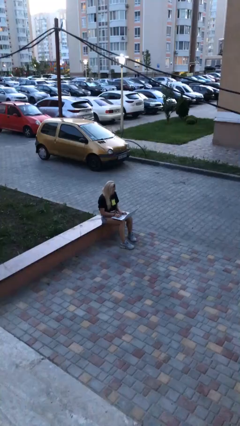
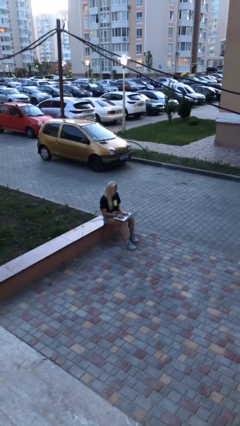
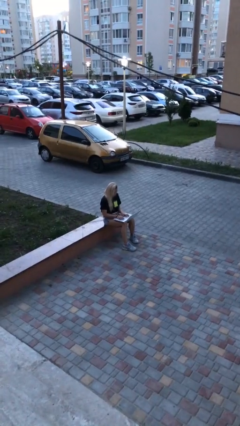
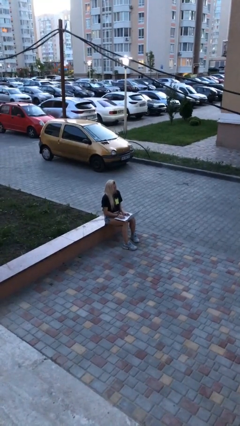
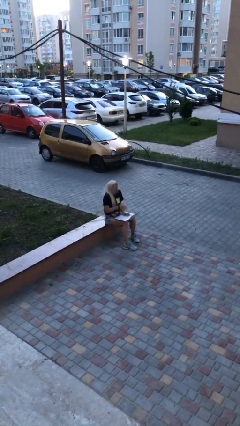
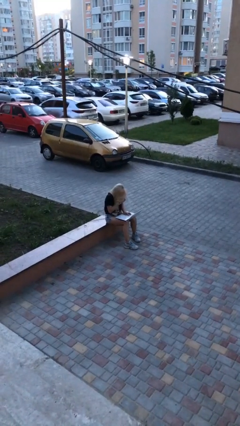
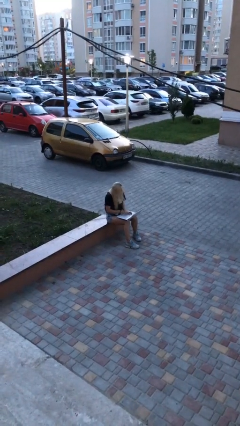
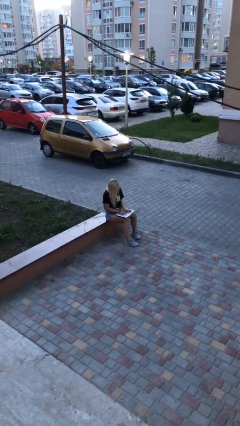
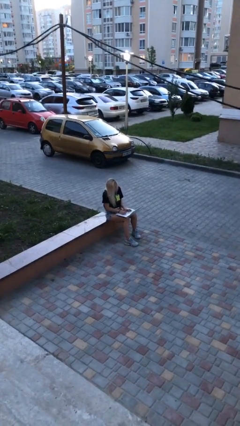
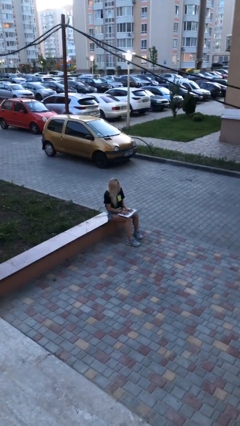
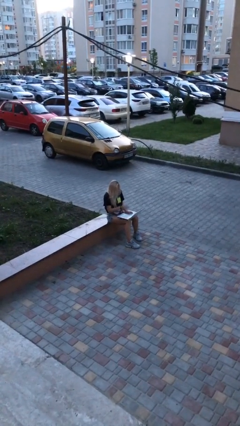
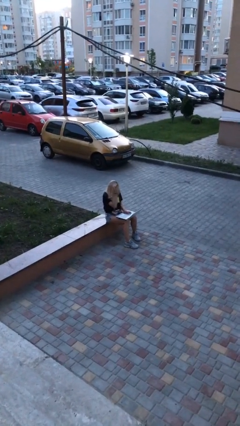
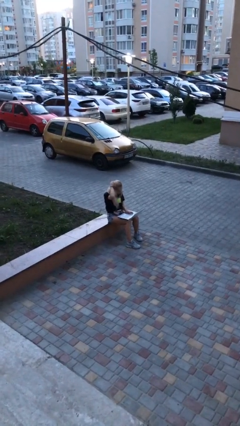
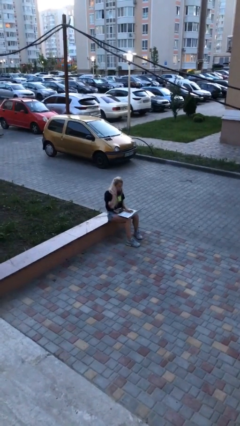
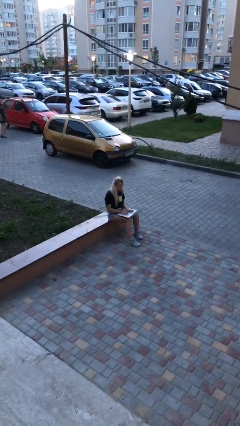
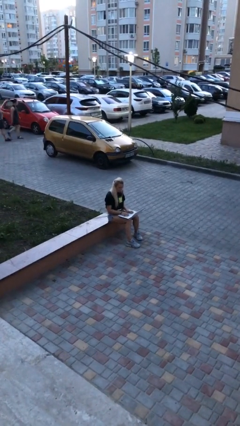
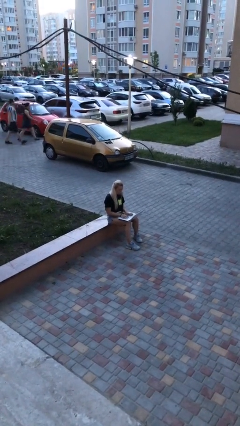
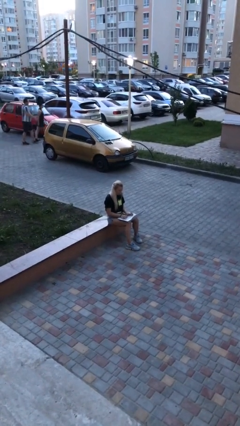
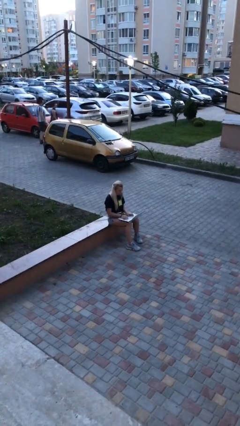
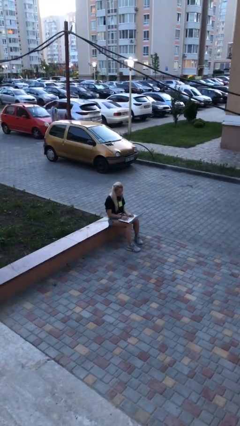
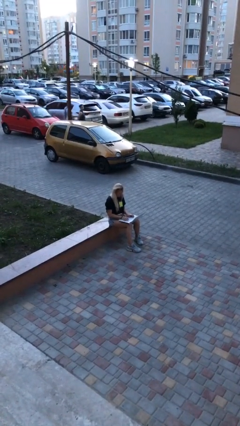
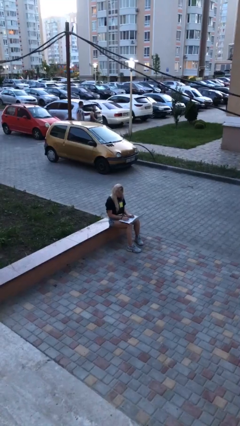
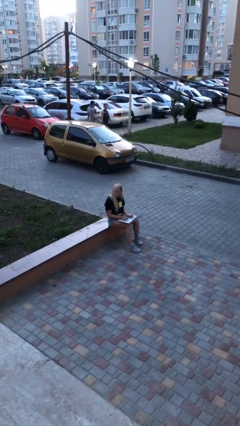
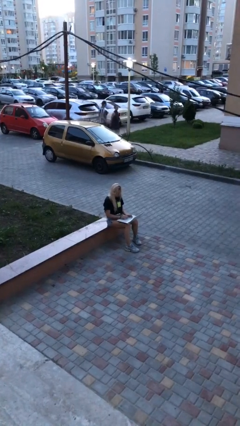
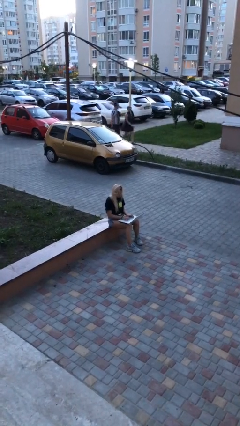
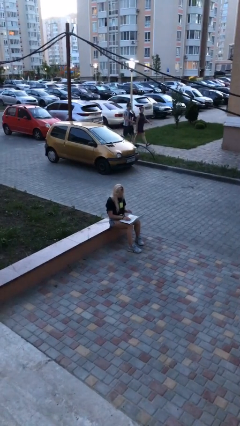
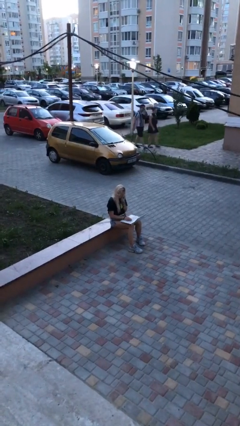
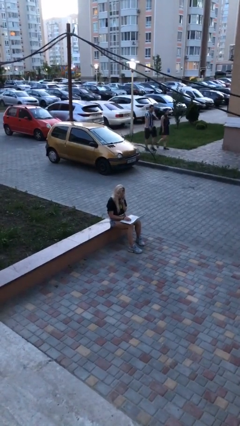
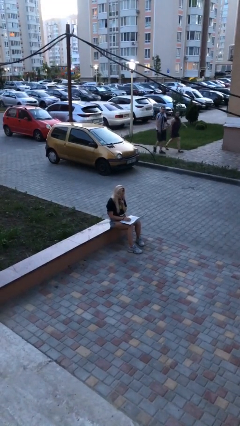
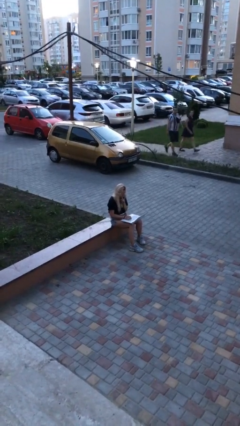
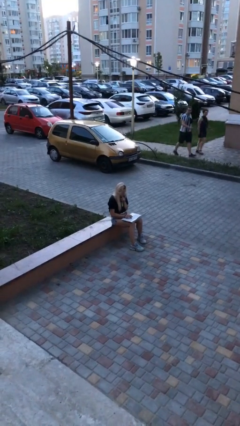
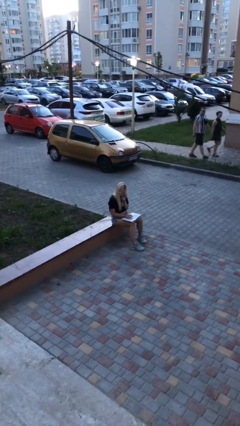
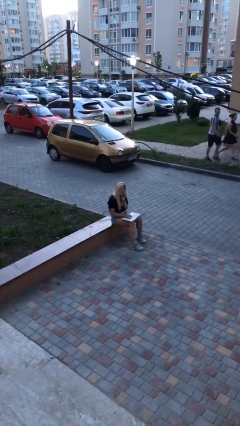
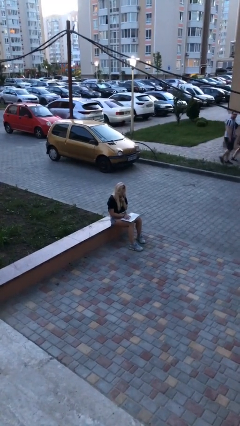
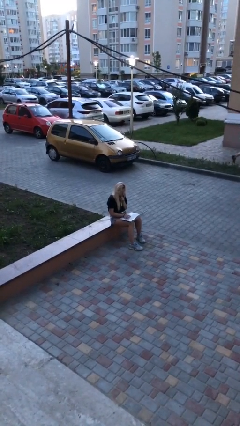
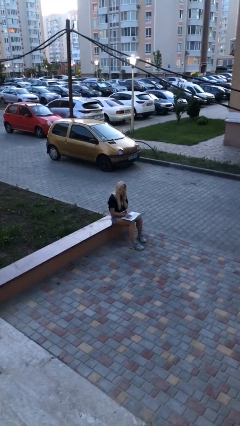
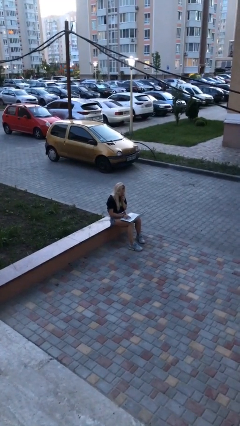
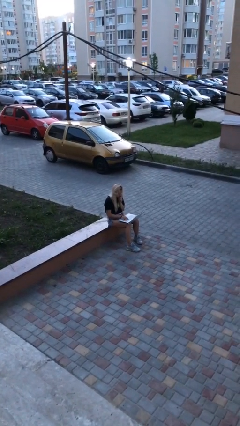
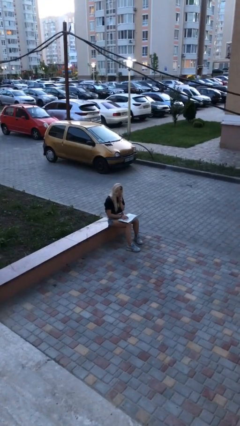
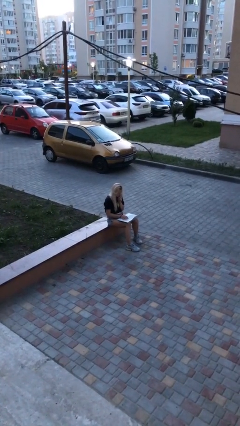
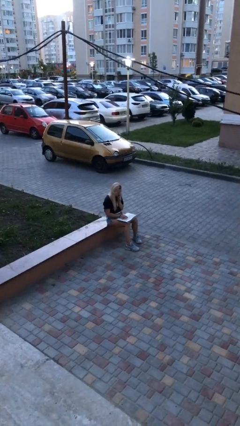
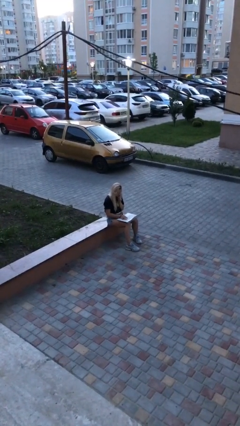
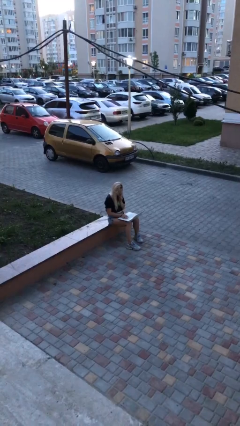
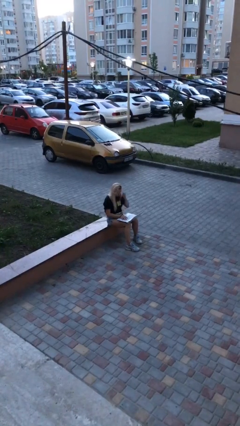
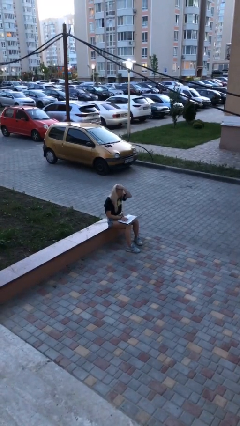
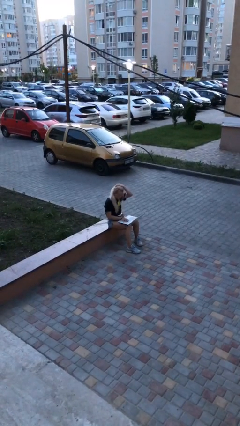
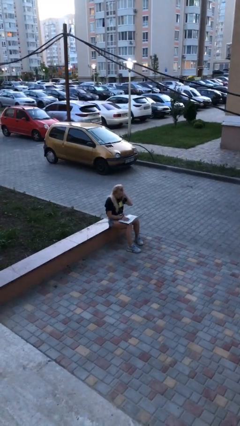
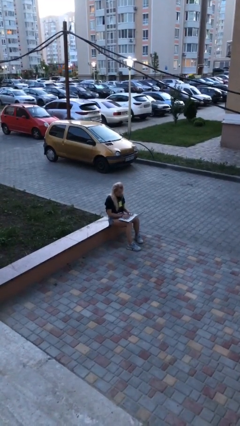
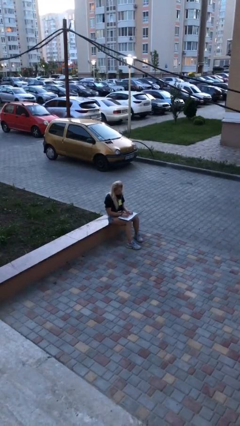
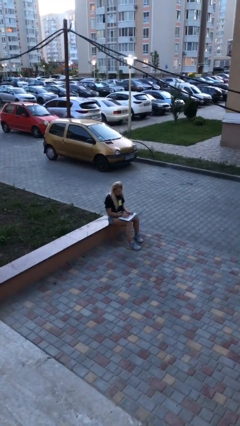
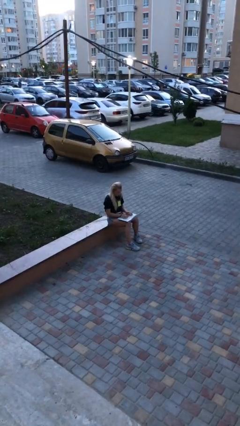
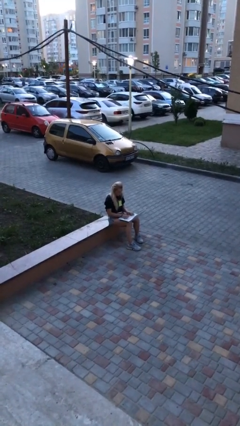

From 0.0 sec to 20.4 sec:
person interacts with laptop

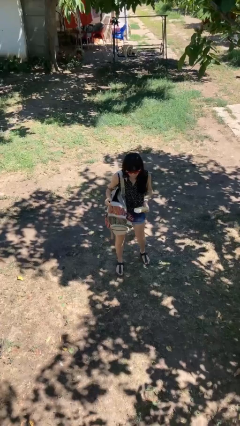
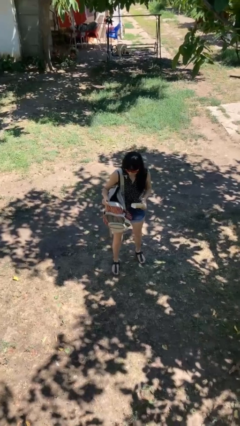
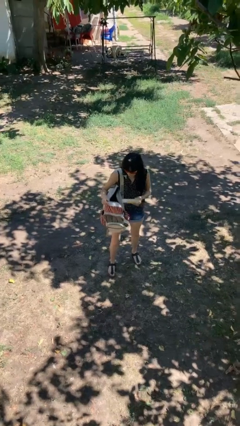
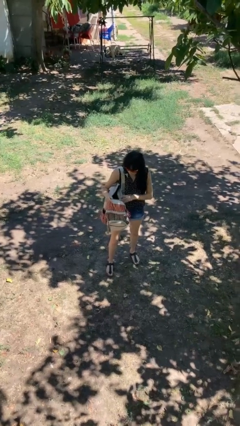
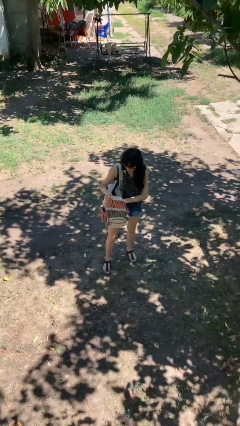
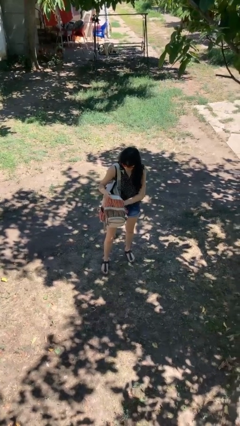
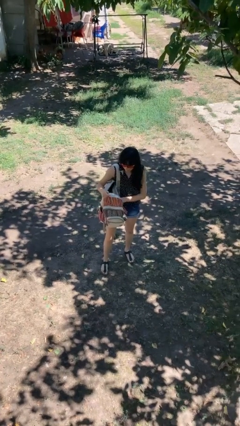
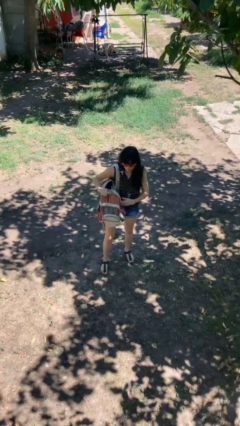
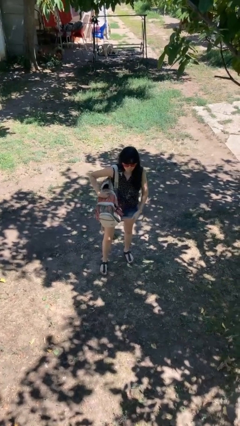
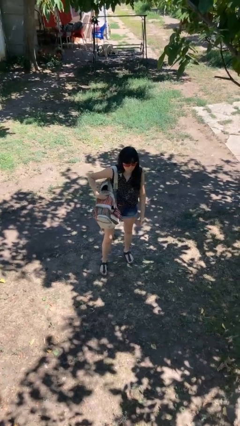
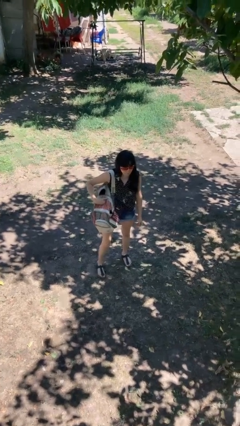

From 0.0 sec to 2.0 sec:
person puts object into backpack

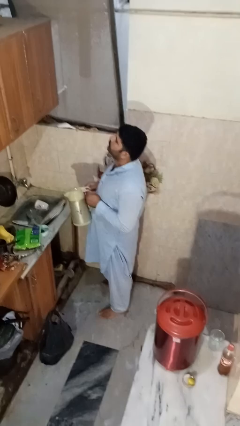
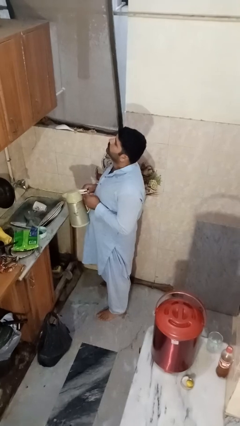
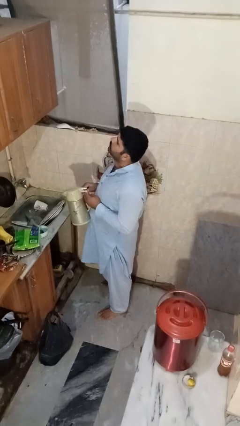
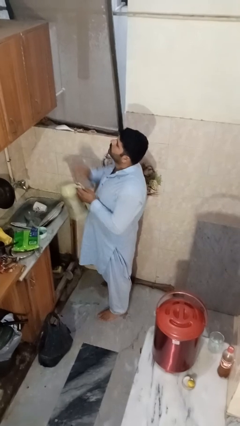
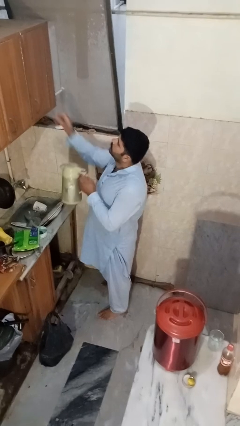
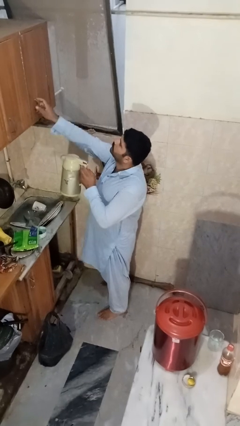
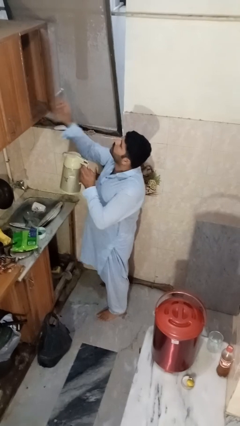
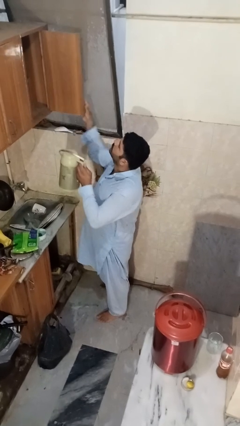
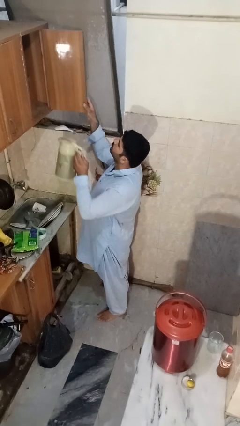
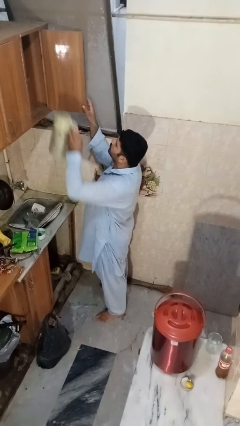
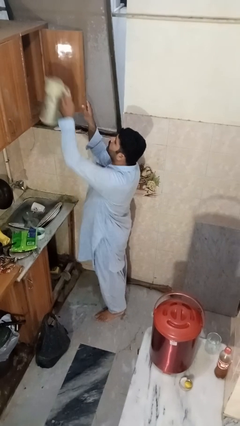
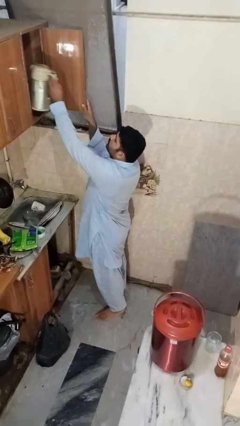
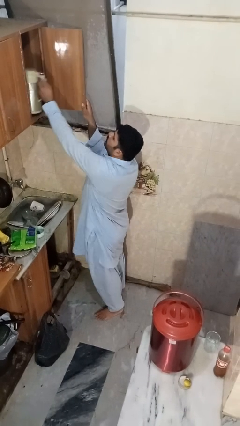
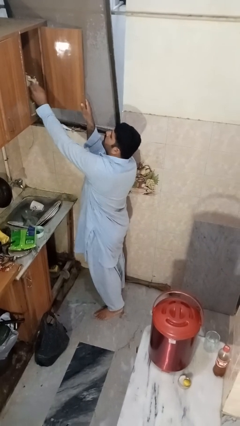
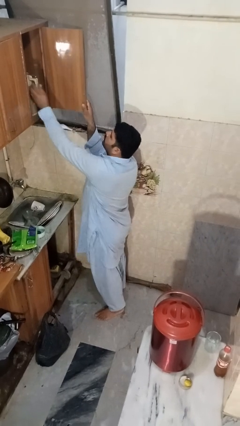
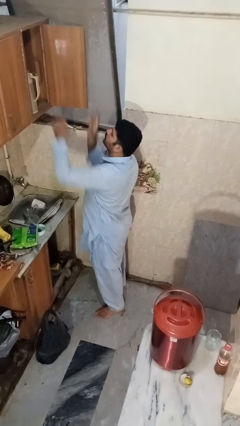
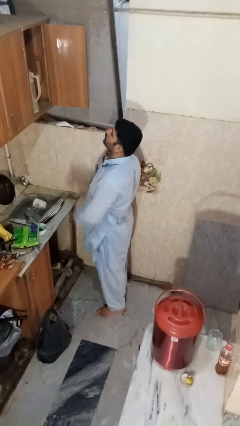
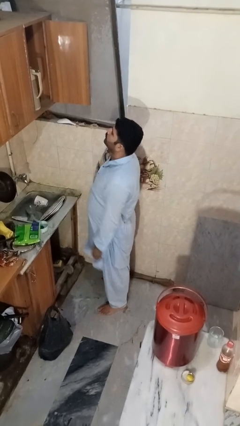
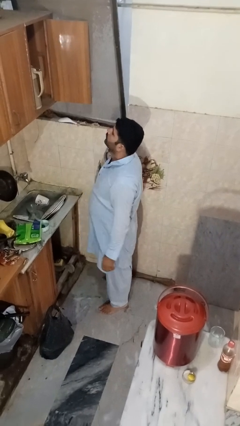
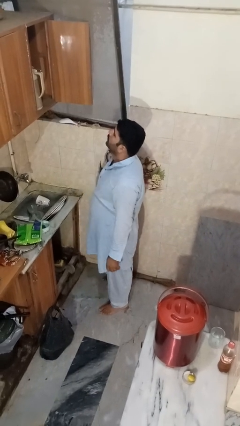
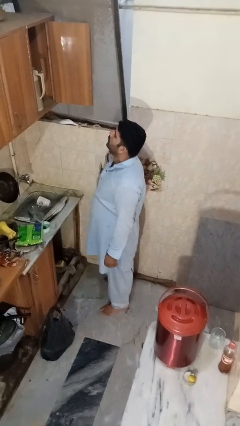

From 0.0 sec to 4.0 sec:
person puts object in cabinet

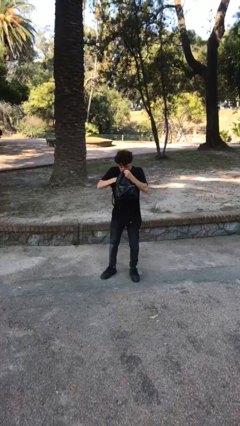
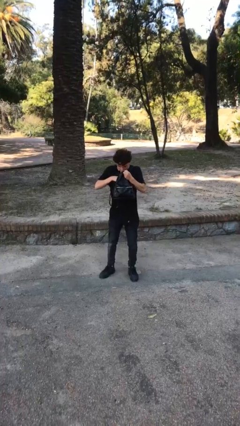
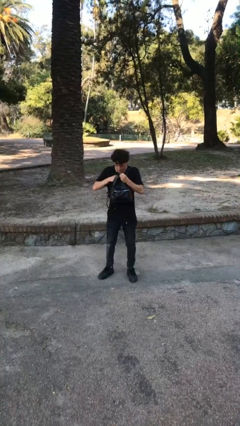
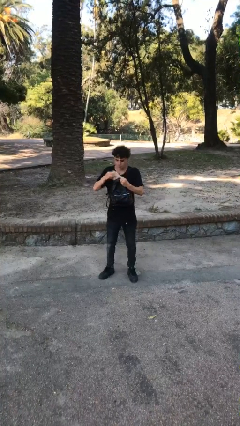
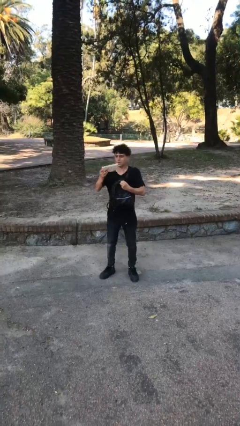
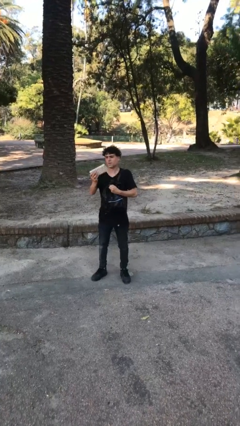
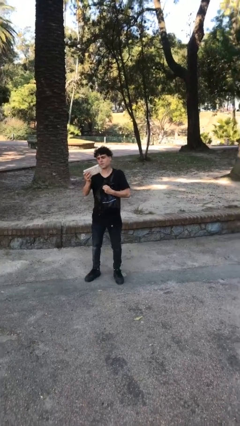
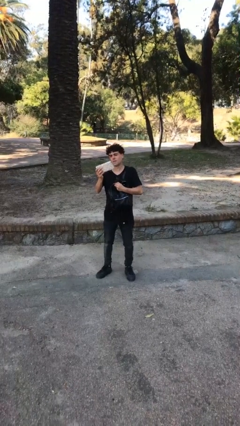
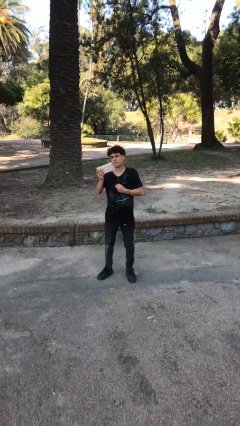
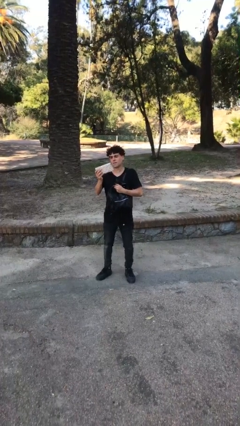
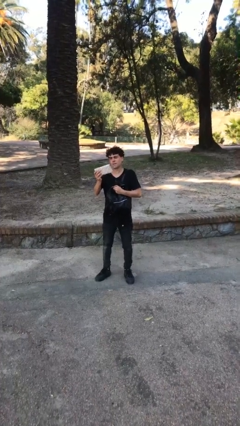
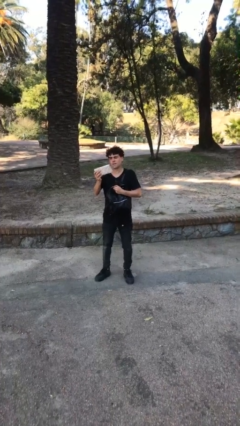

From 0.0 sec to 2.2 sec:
person takes object from purse
